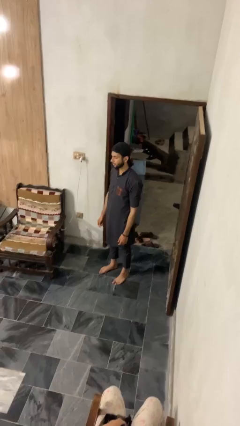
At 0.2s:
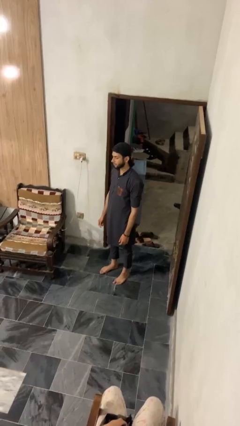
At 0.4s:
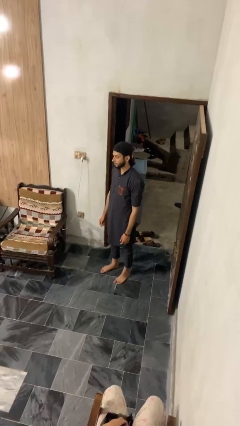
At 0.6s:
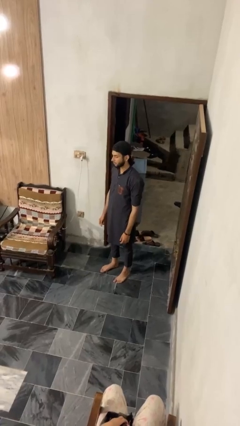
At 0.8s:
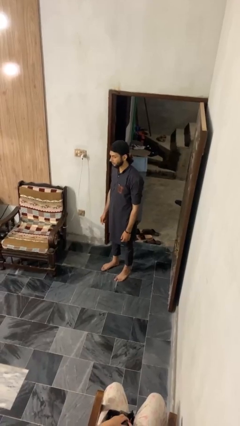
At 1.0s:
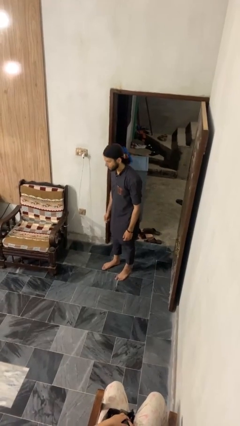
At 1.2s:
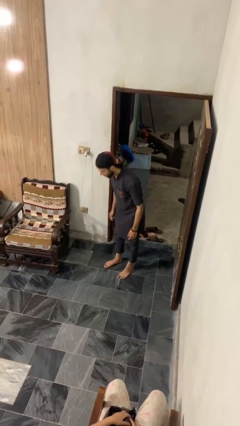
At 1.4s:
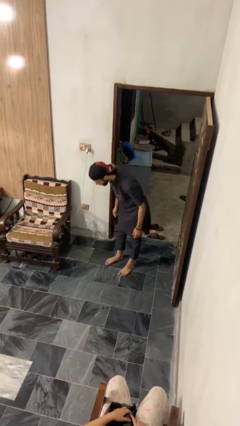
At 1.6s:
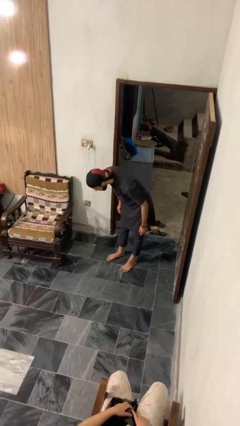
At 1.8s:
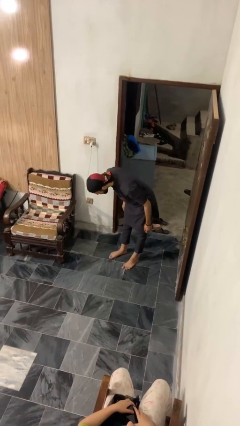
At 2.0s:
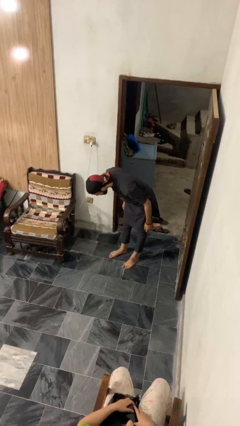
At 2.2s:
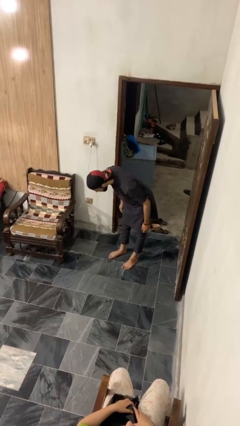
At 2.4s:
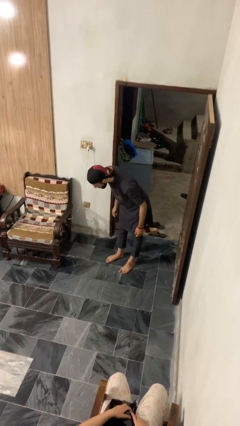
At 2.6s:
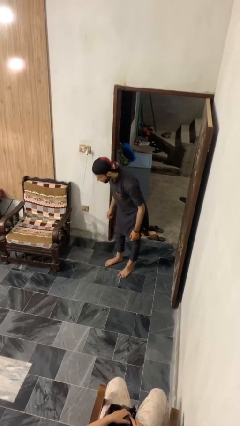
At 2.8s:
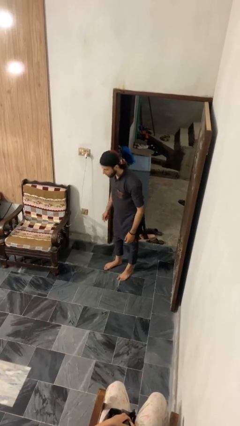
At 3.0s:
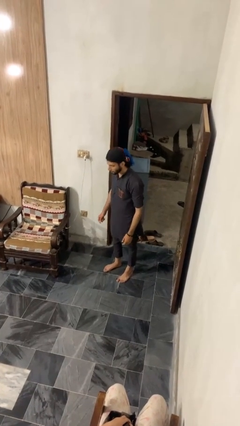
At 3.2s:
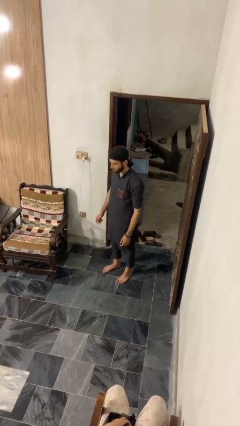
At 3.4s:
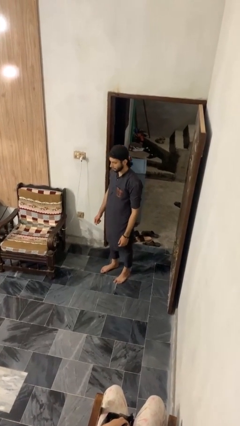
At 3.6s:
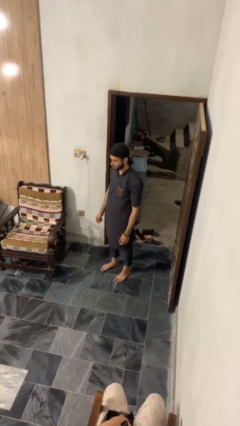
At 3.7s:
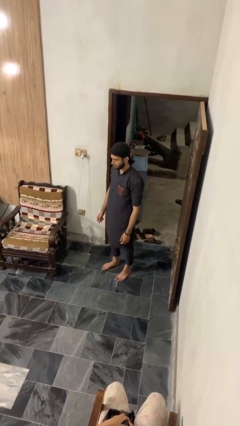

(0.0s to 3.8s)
person bows

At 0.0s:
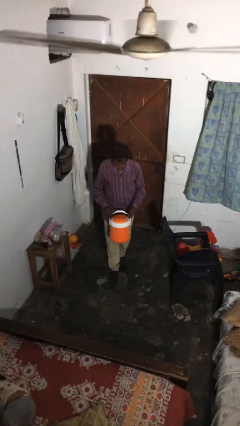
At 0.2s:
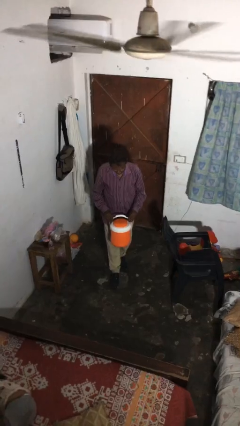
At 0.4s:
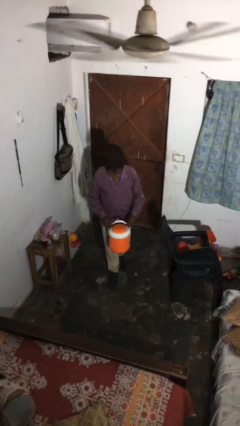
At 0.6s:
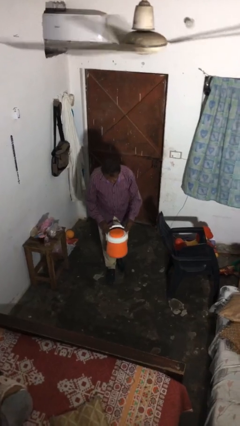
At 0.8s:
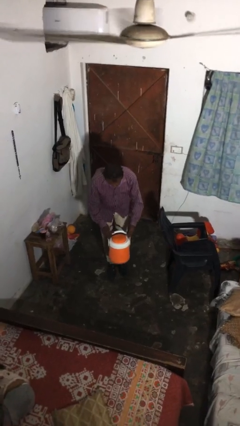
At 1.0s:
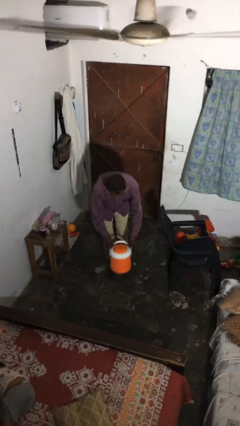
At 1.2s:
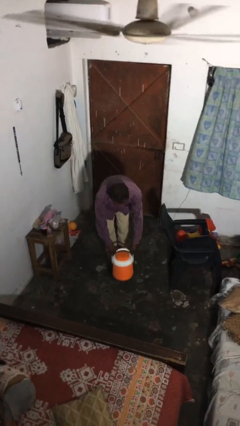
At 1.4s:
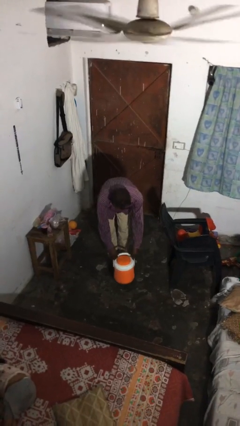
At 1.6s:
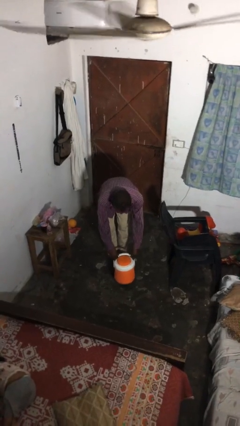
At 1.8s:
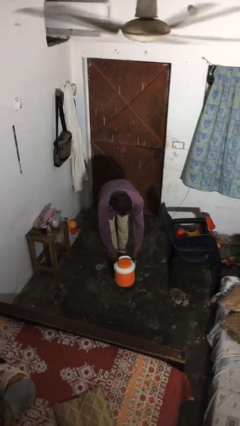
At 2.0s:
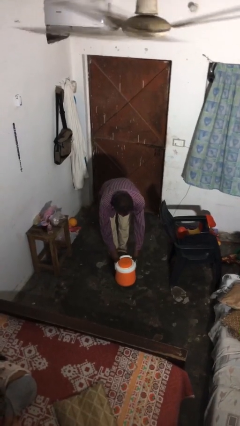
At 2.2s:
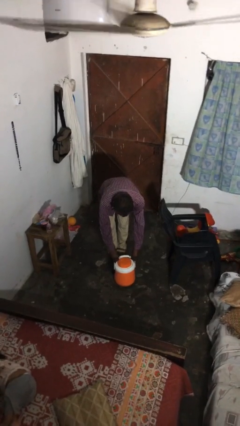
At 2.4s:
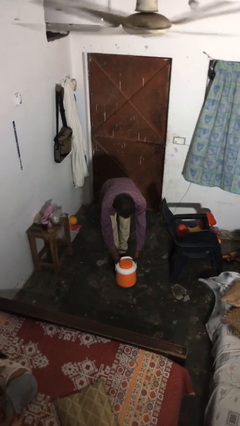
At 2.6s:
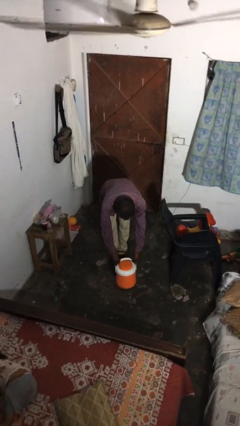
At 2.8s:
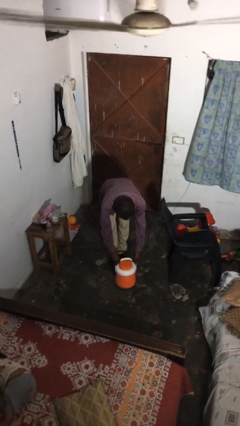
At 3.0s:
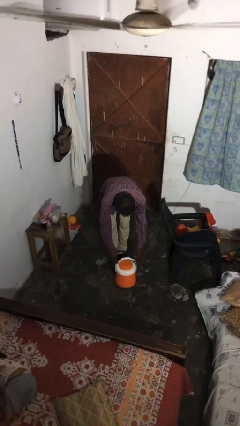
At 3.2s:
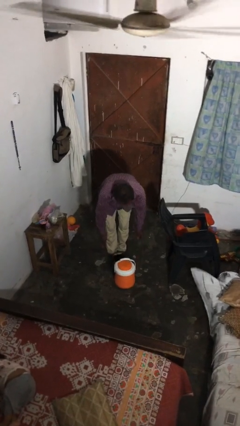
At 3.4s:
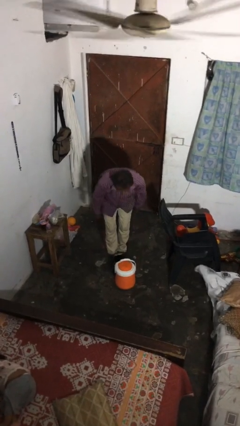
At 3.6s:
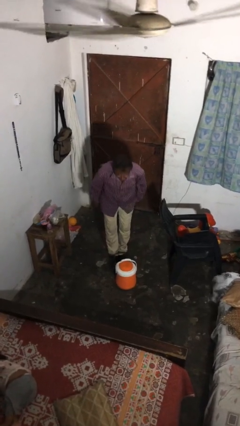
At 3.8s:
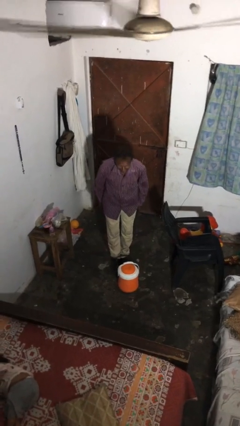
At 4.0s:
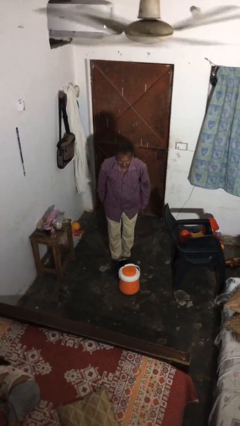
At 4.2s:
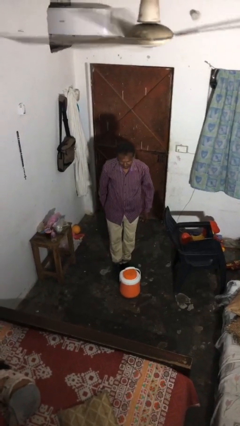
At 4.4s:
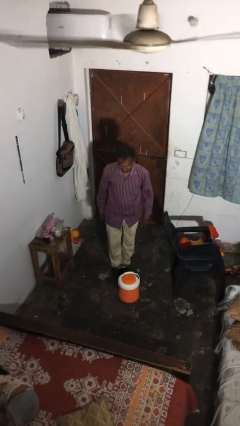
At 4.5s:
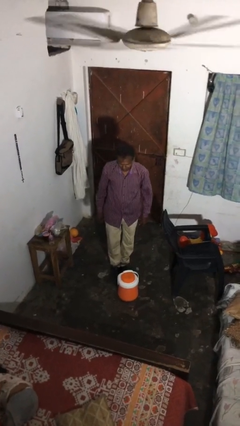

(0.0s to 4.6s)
person puts down object on floor

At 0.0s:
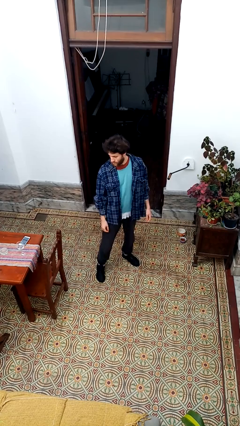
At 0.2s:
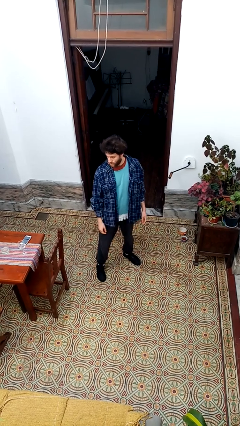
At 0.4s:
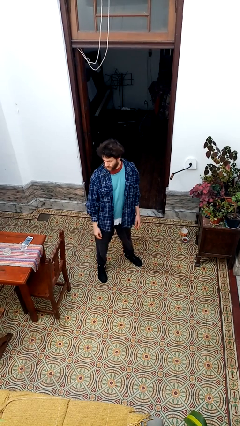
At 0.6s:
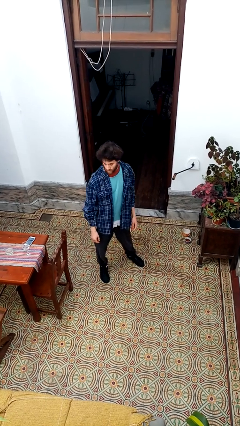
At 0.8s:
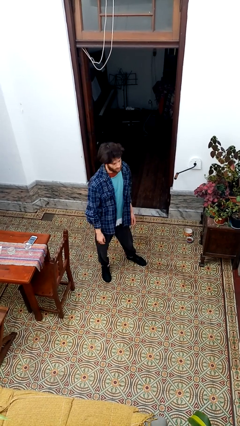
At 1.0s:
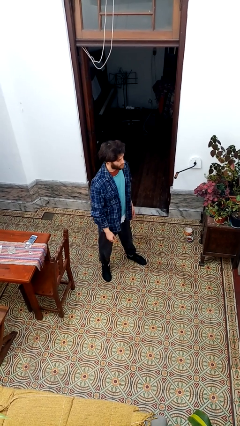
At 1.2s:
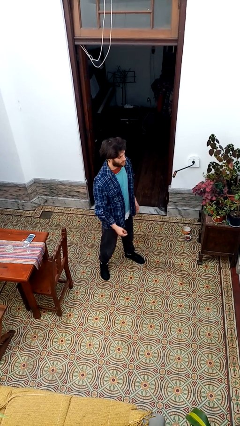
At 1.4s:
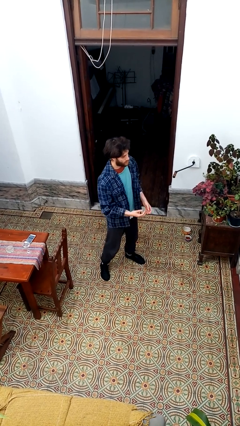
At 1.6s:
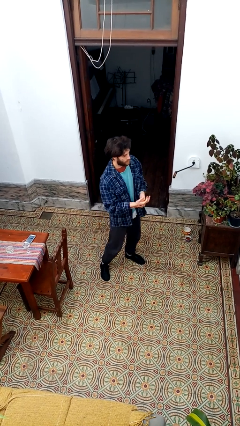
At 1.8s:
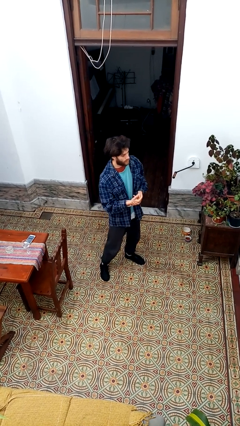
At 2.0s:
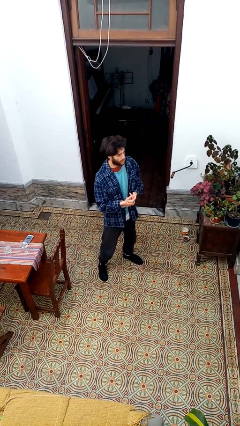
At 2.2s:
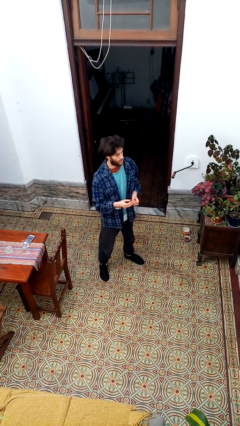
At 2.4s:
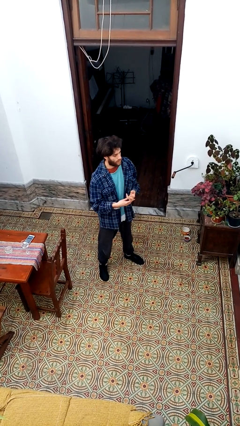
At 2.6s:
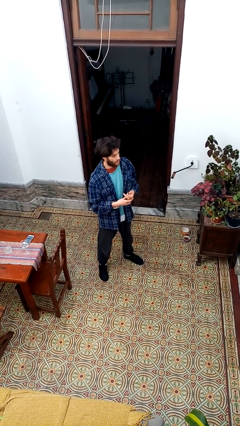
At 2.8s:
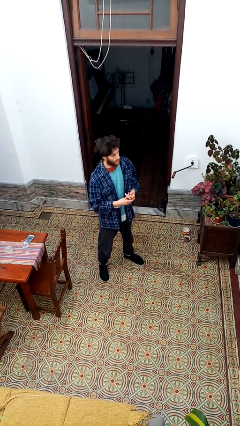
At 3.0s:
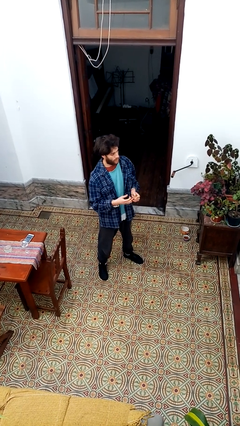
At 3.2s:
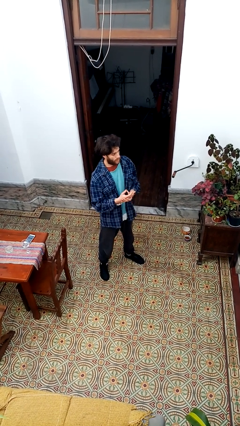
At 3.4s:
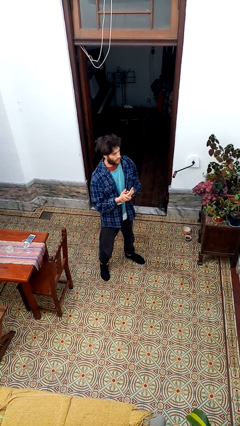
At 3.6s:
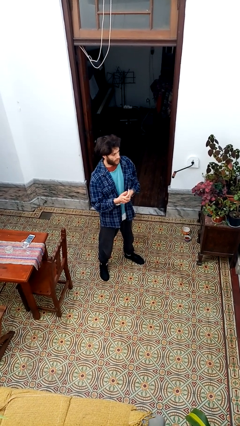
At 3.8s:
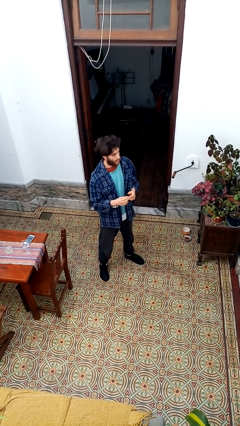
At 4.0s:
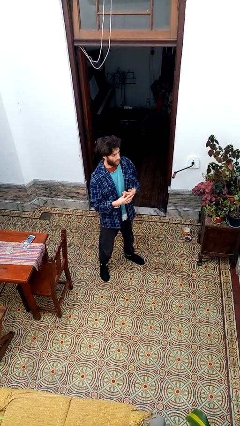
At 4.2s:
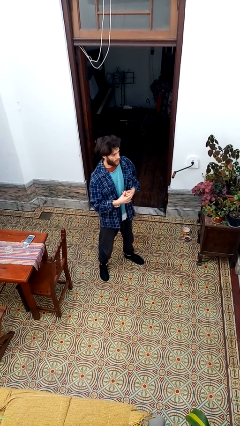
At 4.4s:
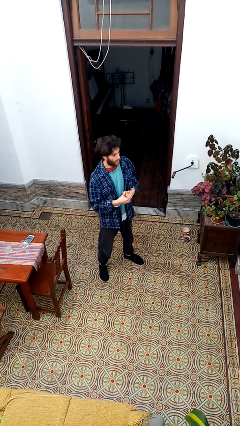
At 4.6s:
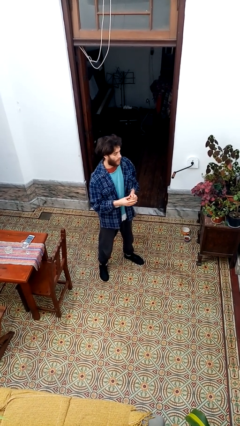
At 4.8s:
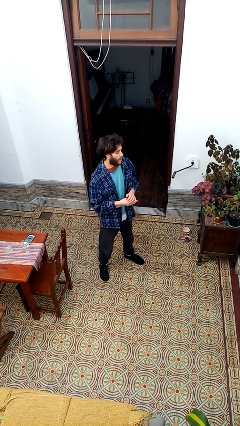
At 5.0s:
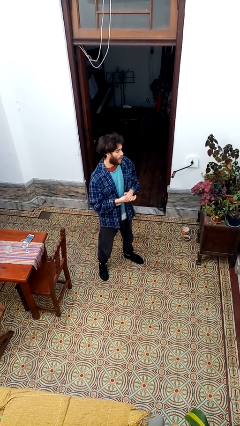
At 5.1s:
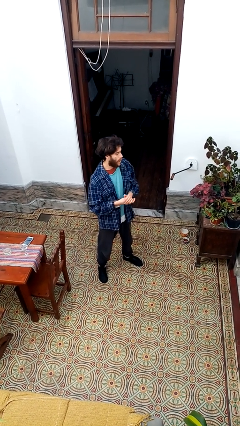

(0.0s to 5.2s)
person cracks knuckles

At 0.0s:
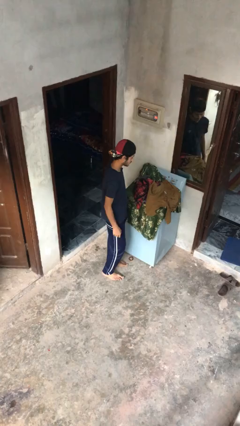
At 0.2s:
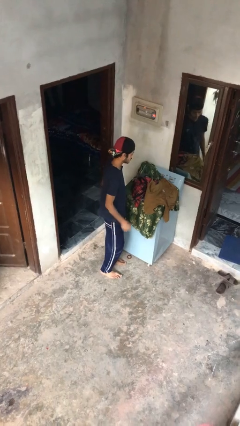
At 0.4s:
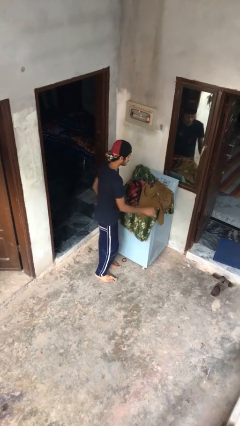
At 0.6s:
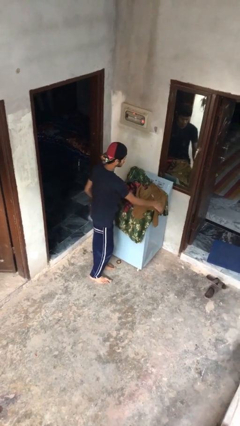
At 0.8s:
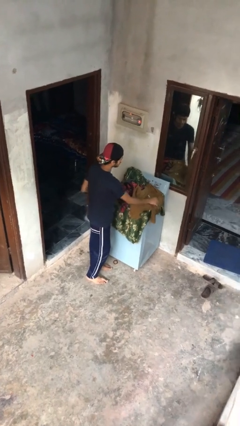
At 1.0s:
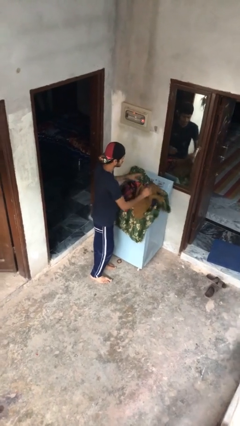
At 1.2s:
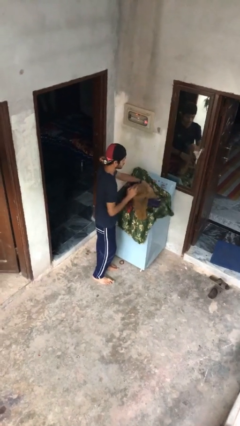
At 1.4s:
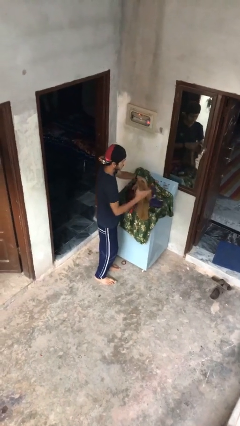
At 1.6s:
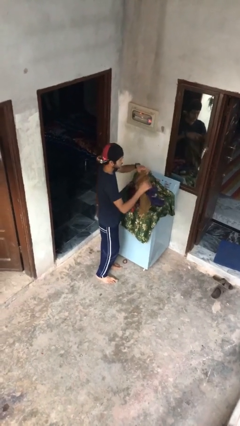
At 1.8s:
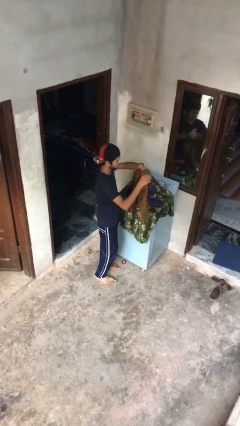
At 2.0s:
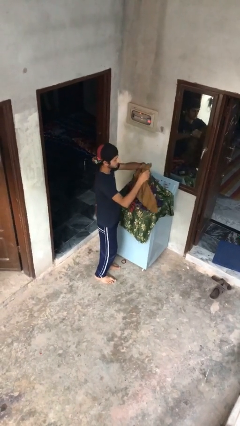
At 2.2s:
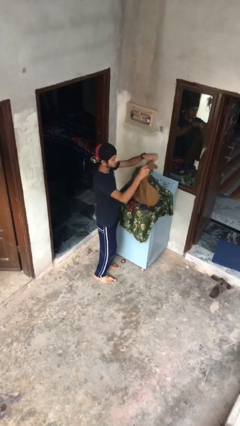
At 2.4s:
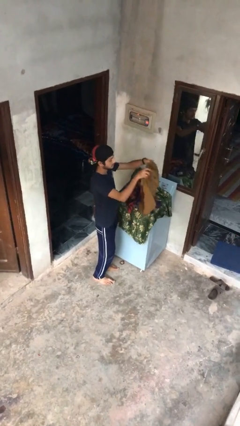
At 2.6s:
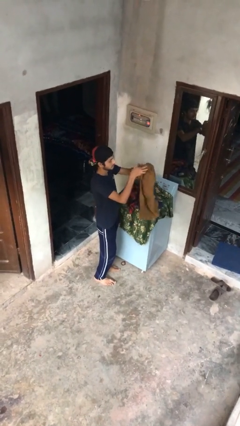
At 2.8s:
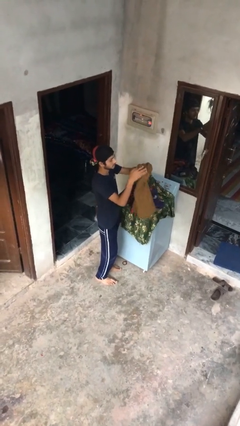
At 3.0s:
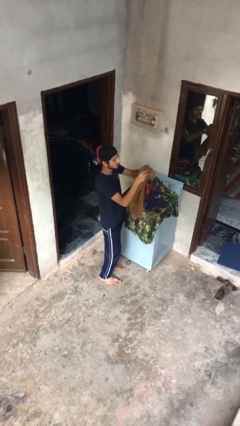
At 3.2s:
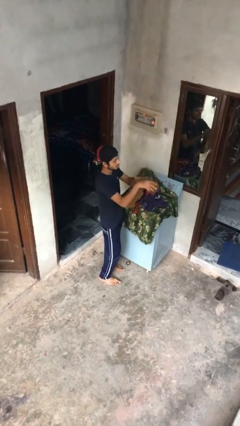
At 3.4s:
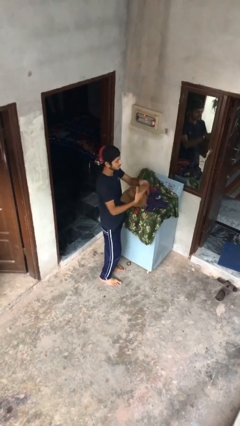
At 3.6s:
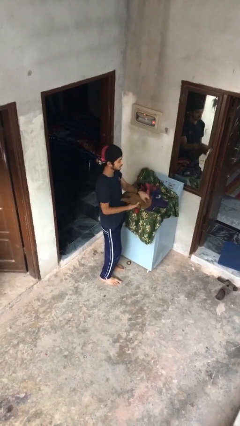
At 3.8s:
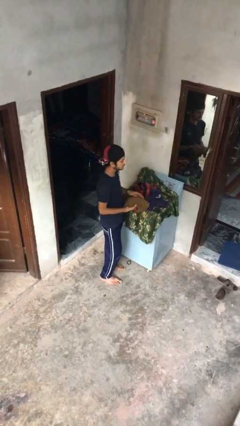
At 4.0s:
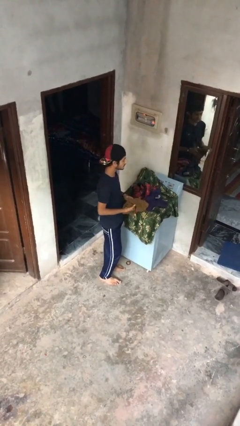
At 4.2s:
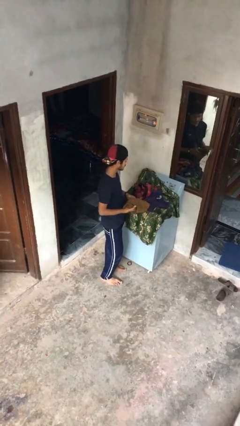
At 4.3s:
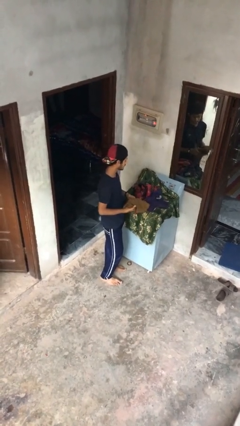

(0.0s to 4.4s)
person folds shirt
